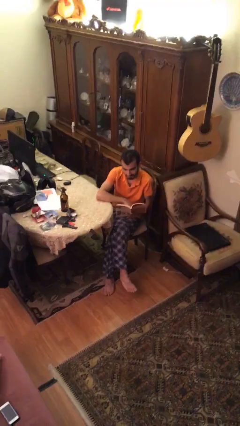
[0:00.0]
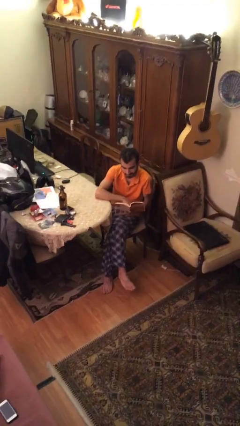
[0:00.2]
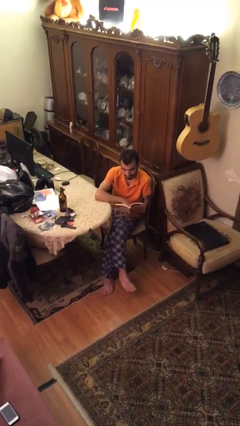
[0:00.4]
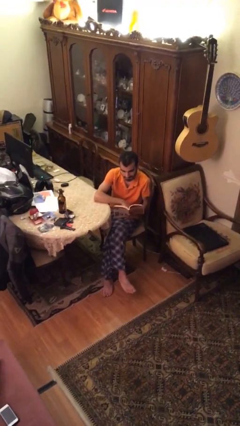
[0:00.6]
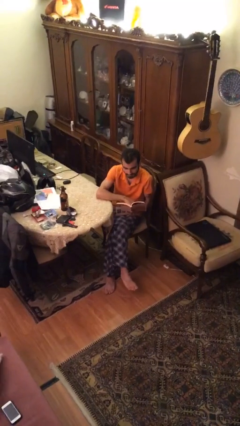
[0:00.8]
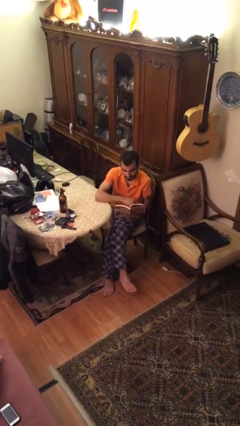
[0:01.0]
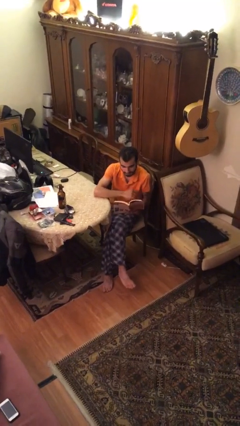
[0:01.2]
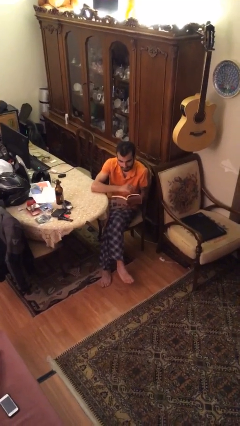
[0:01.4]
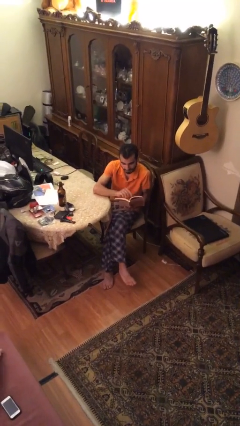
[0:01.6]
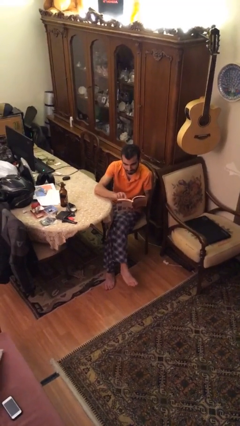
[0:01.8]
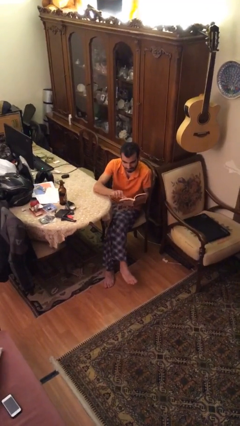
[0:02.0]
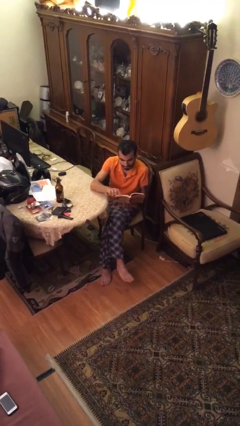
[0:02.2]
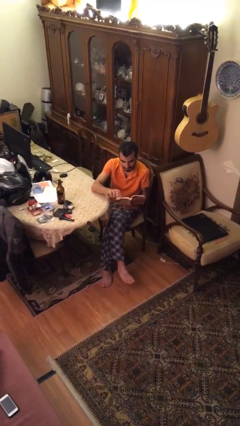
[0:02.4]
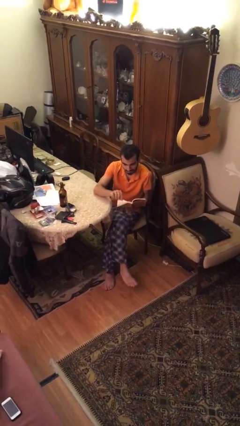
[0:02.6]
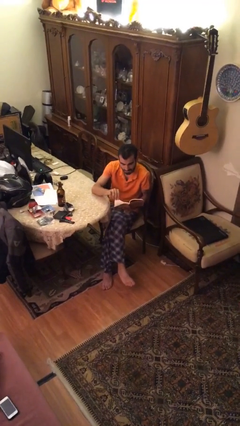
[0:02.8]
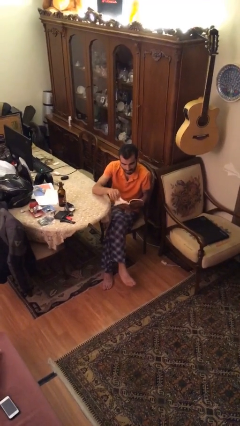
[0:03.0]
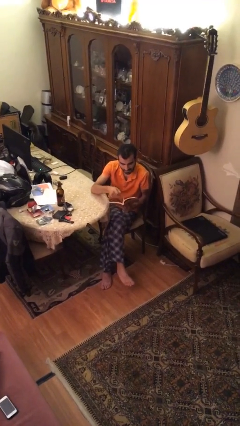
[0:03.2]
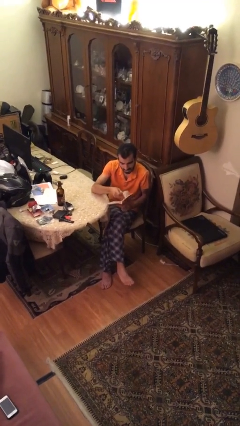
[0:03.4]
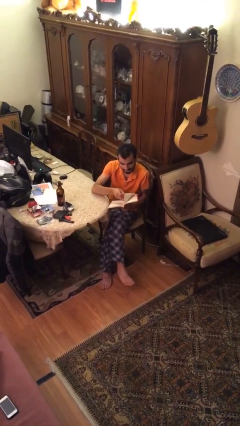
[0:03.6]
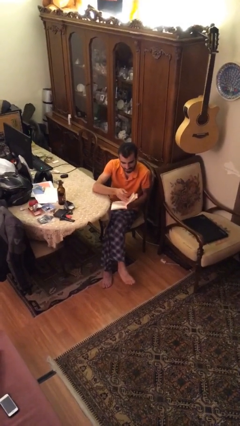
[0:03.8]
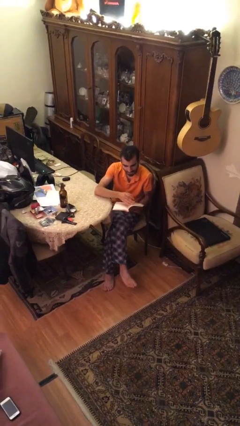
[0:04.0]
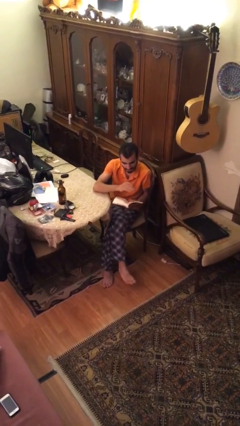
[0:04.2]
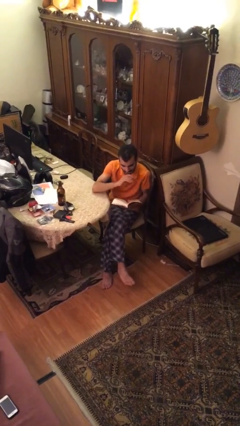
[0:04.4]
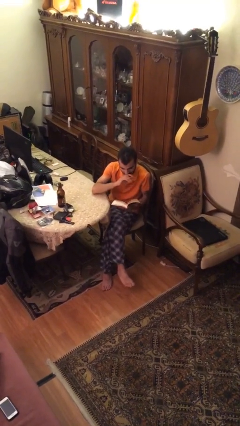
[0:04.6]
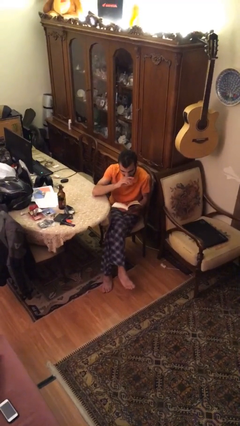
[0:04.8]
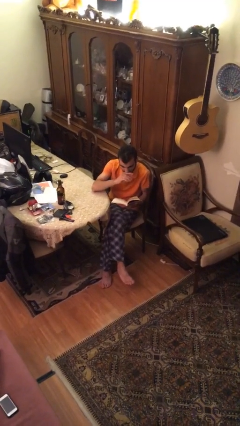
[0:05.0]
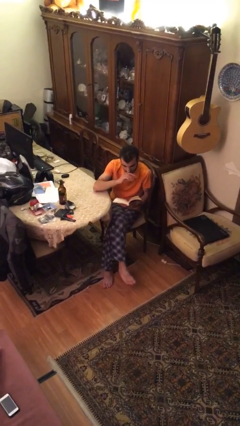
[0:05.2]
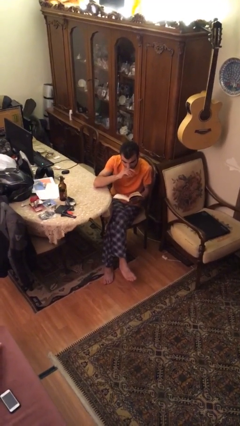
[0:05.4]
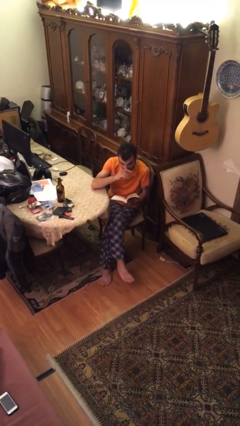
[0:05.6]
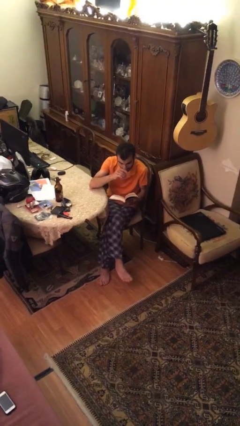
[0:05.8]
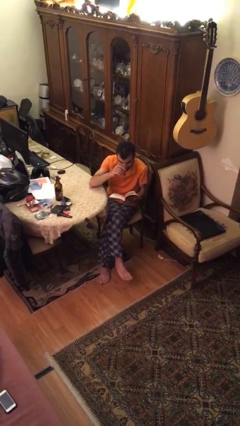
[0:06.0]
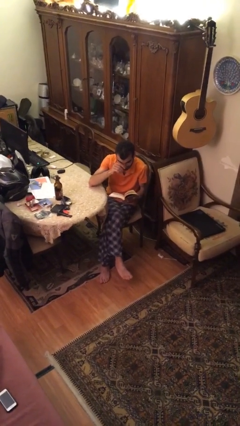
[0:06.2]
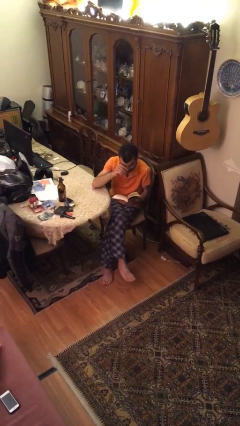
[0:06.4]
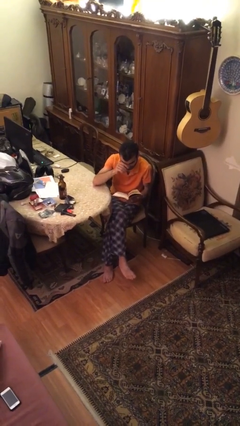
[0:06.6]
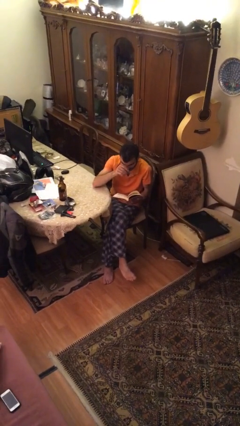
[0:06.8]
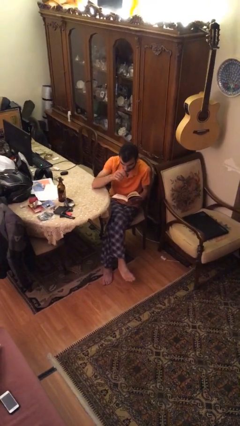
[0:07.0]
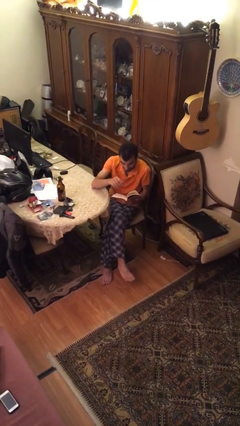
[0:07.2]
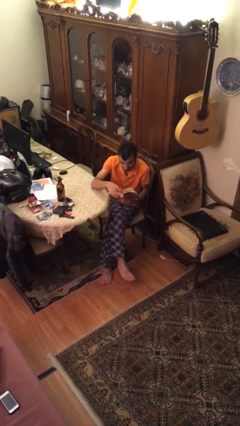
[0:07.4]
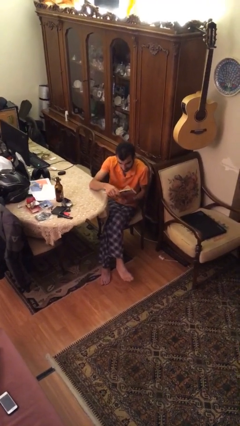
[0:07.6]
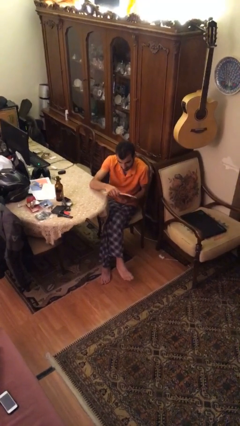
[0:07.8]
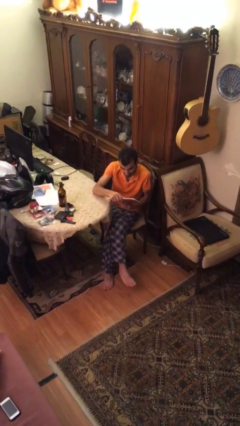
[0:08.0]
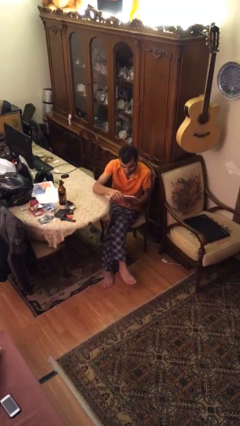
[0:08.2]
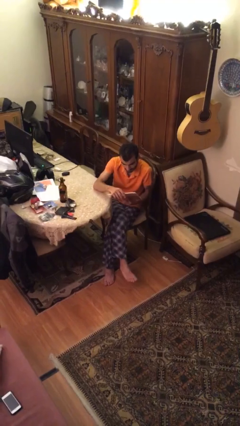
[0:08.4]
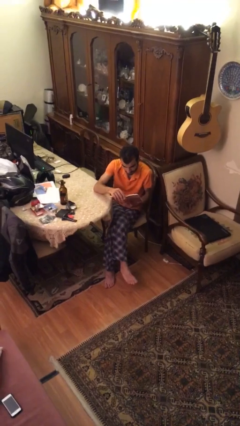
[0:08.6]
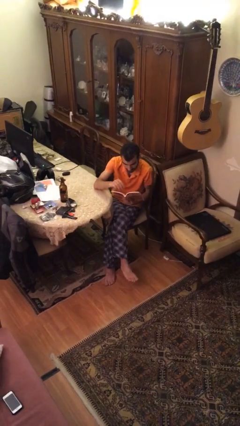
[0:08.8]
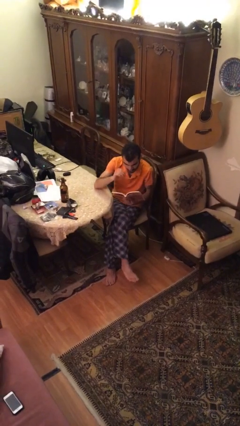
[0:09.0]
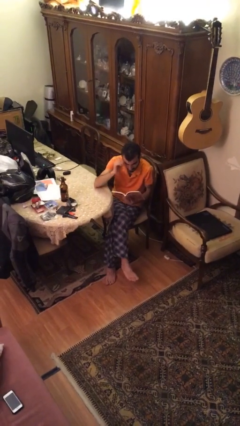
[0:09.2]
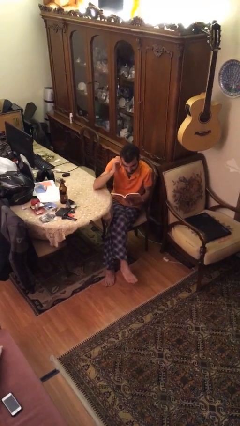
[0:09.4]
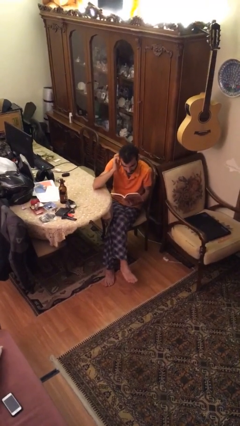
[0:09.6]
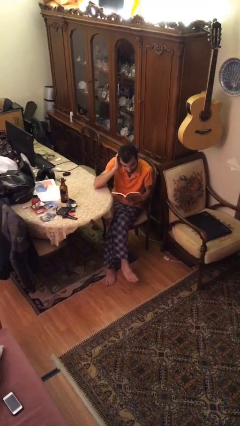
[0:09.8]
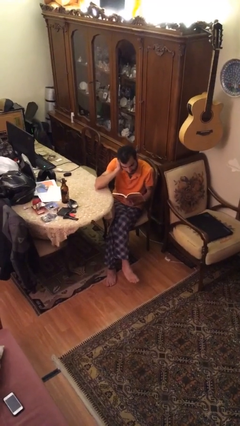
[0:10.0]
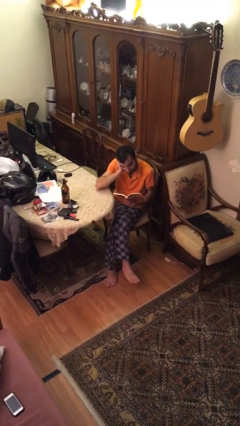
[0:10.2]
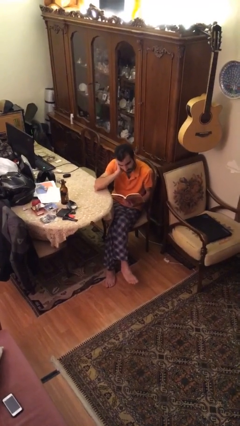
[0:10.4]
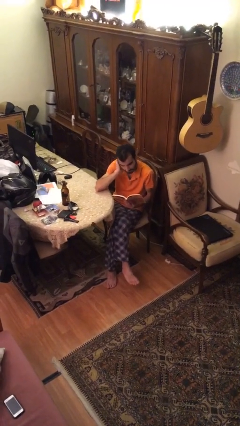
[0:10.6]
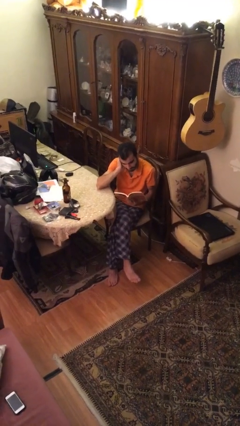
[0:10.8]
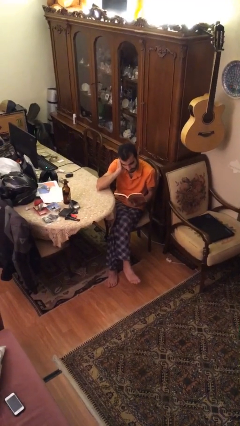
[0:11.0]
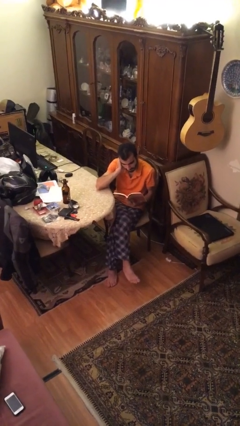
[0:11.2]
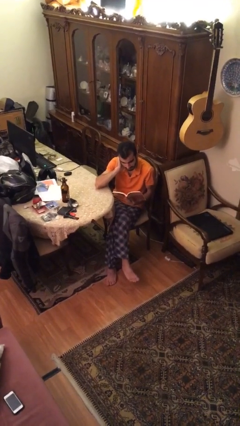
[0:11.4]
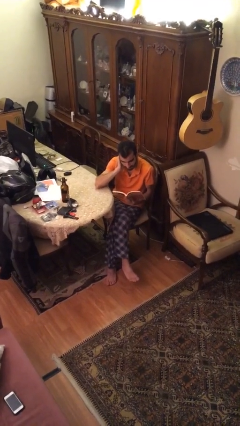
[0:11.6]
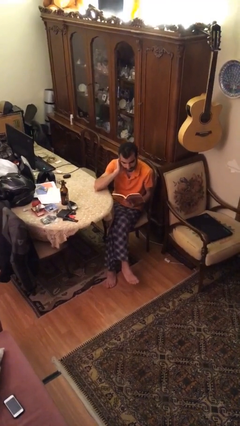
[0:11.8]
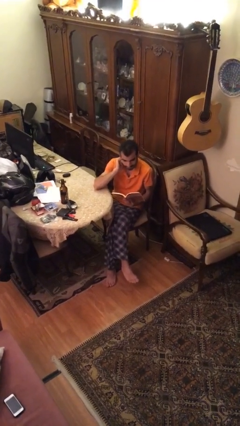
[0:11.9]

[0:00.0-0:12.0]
person reads document

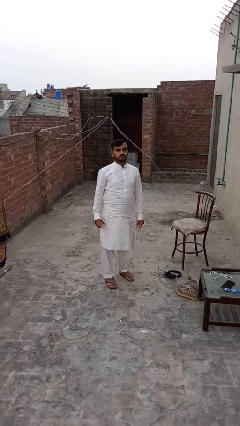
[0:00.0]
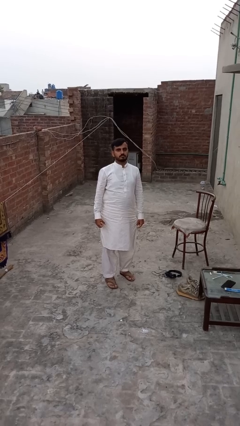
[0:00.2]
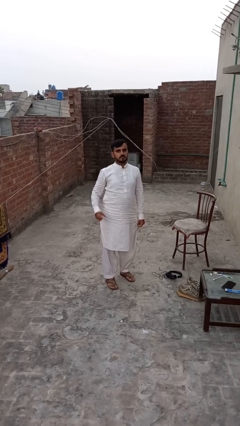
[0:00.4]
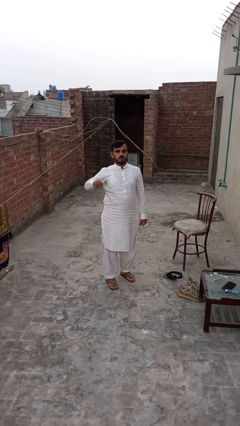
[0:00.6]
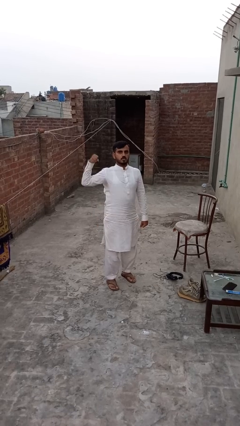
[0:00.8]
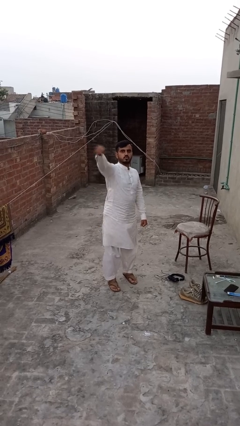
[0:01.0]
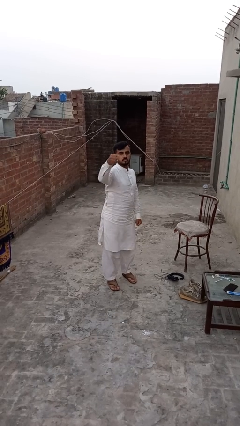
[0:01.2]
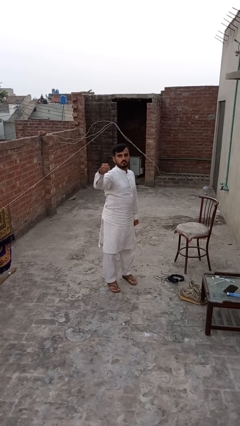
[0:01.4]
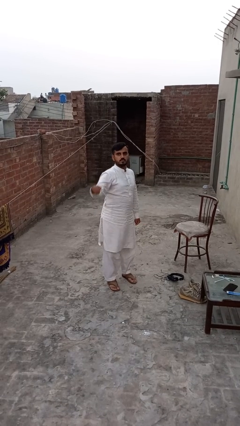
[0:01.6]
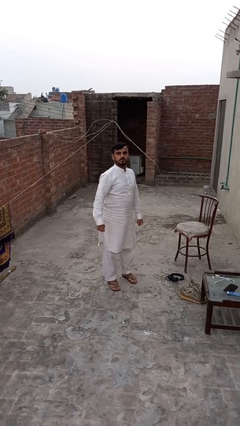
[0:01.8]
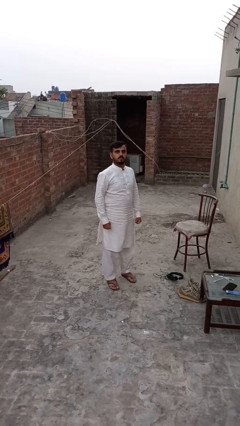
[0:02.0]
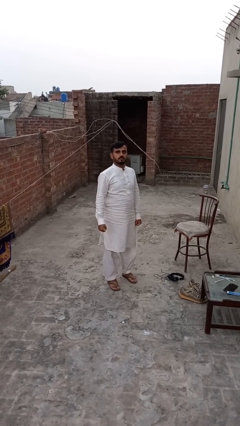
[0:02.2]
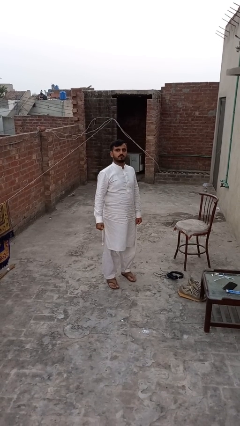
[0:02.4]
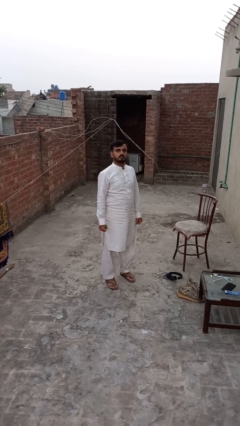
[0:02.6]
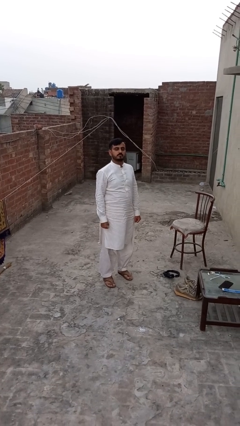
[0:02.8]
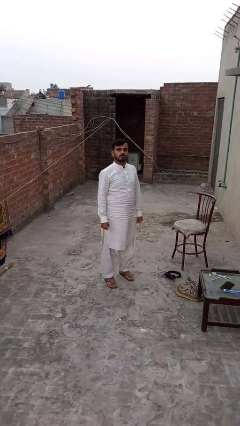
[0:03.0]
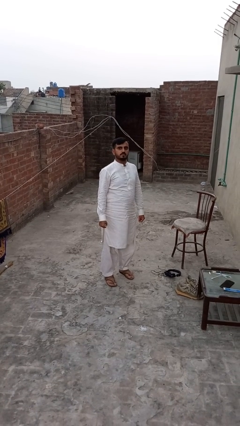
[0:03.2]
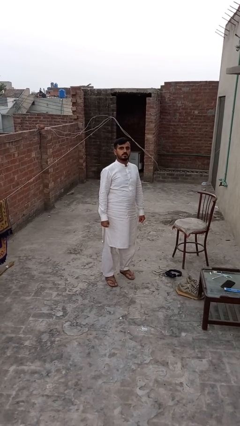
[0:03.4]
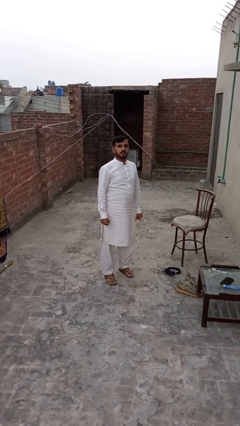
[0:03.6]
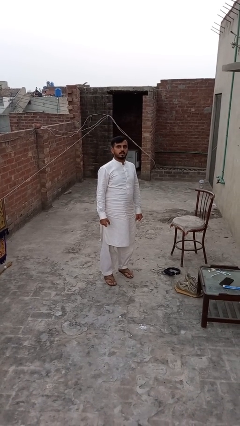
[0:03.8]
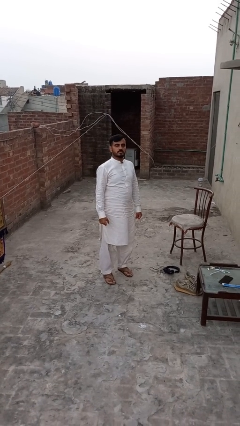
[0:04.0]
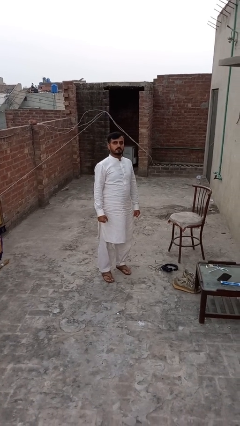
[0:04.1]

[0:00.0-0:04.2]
person punches

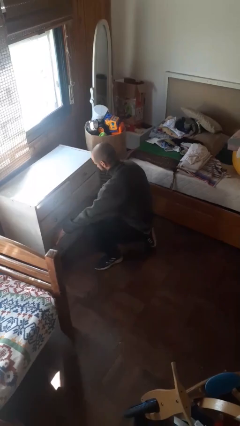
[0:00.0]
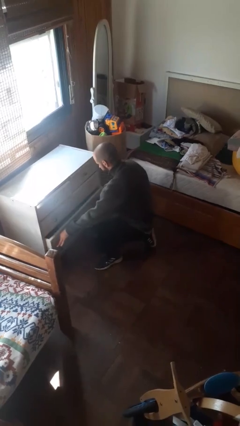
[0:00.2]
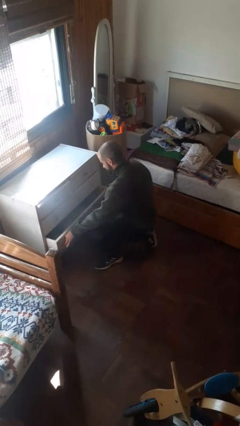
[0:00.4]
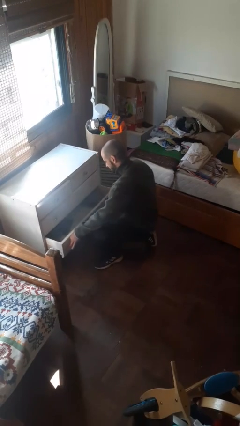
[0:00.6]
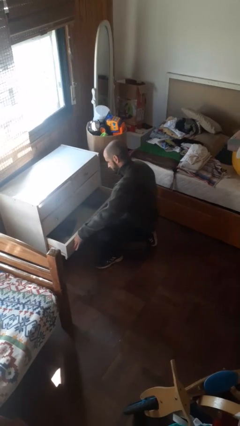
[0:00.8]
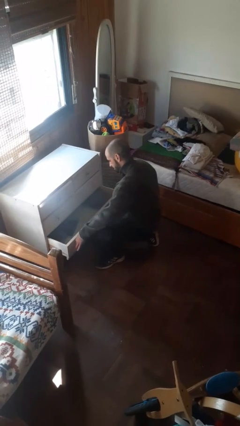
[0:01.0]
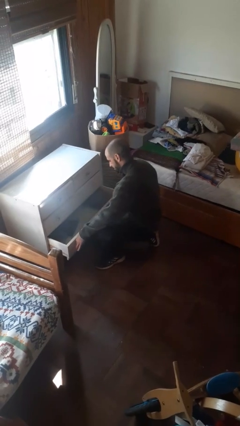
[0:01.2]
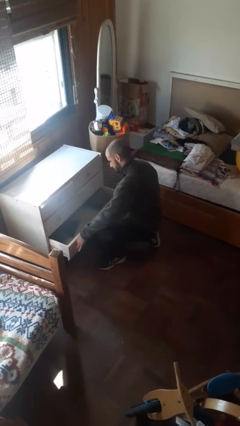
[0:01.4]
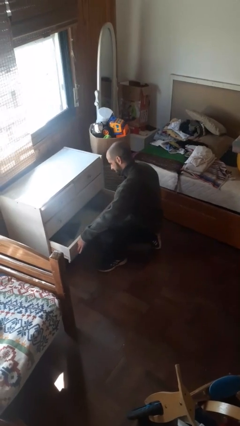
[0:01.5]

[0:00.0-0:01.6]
person opens dresser drawer
